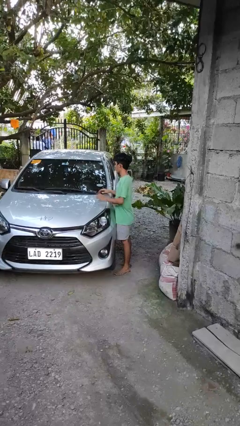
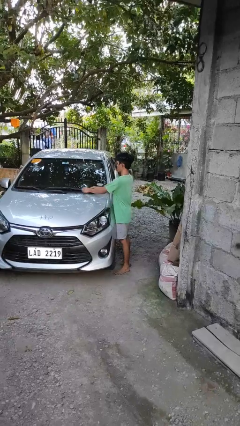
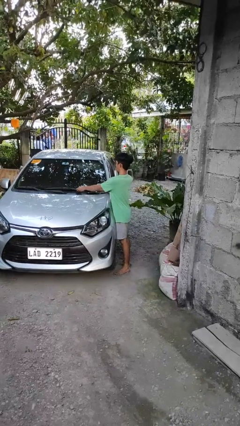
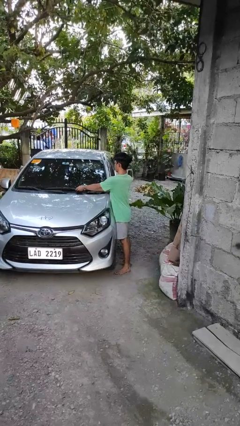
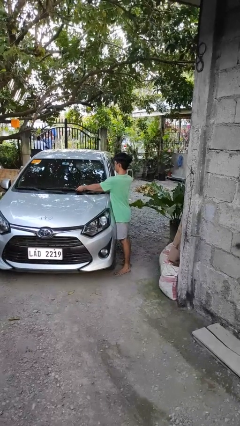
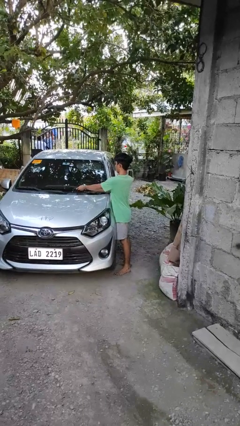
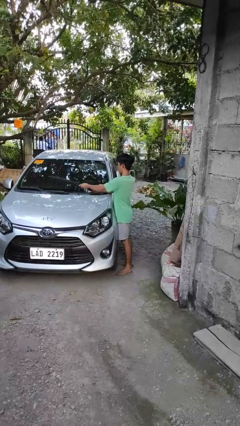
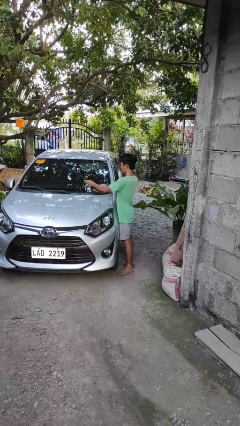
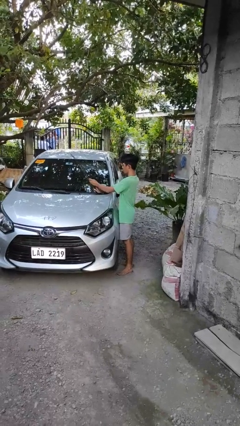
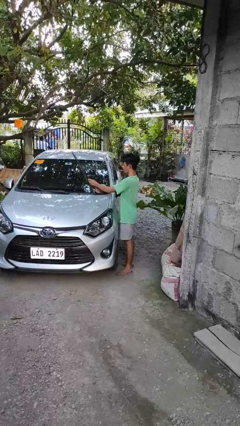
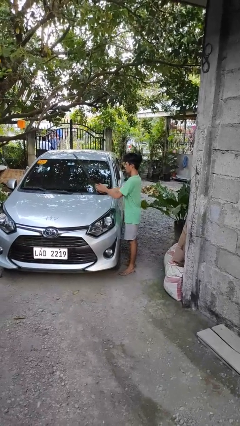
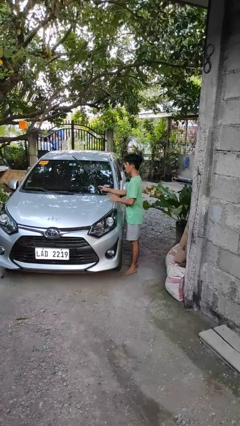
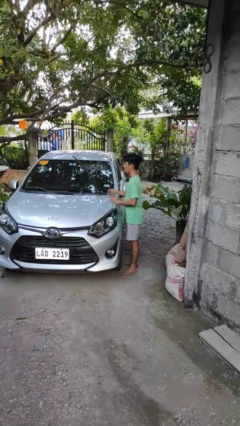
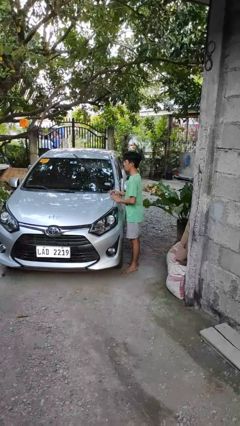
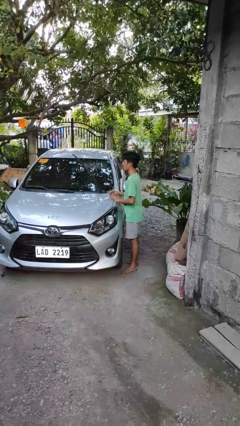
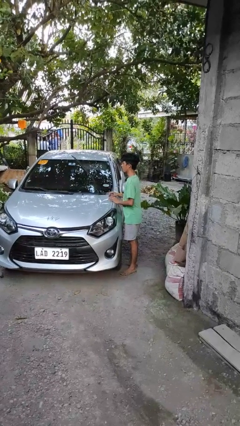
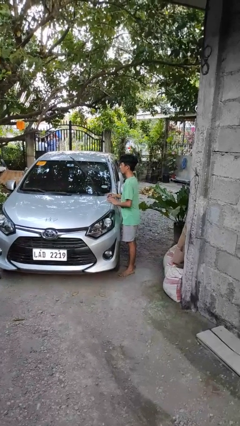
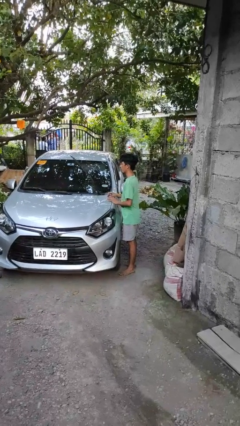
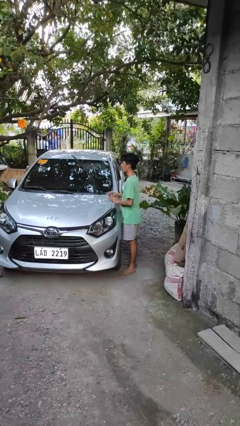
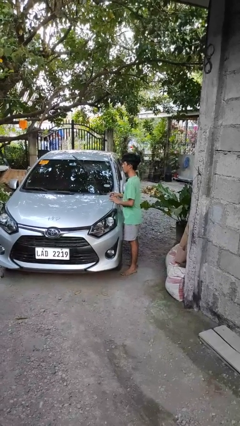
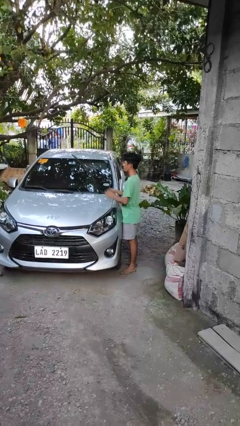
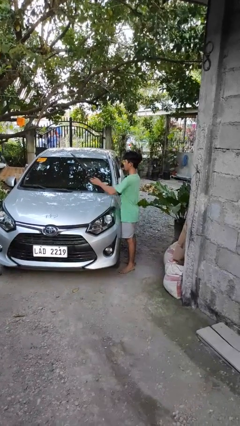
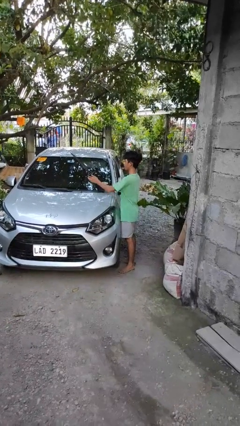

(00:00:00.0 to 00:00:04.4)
person flips up car wipers

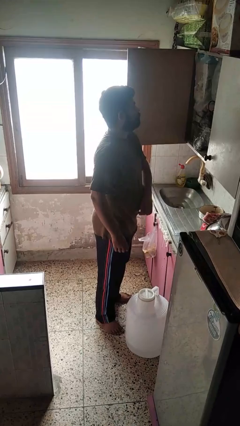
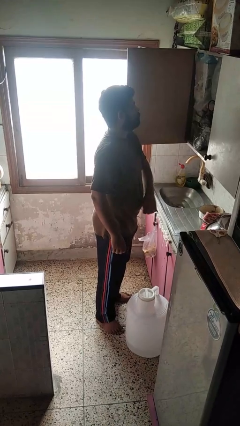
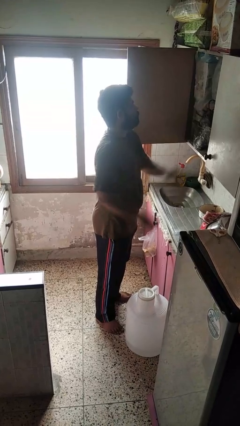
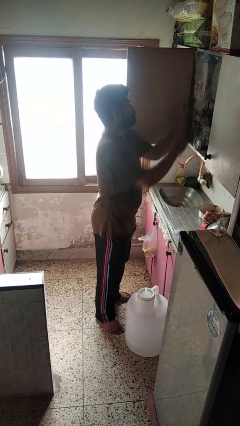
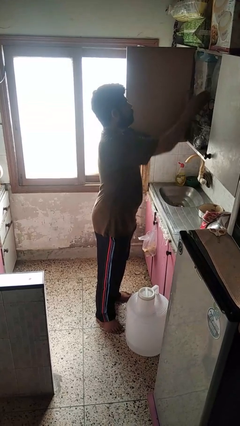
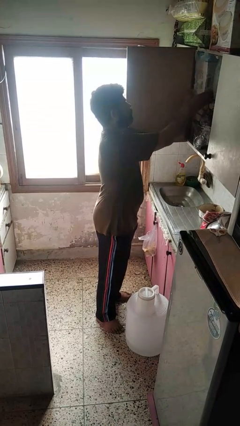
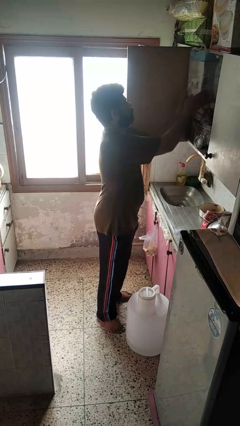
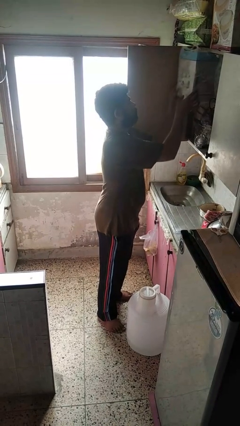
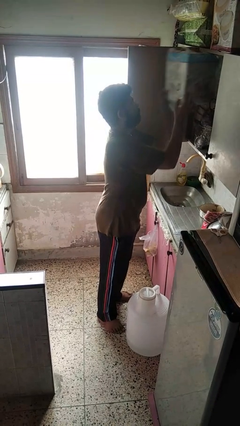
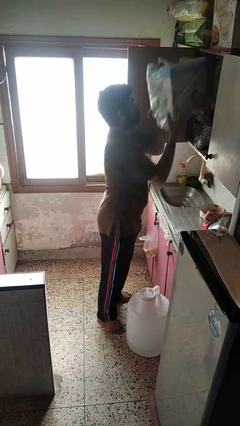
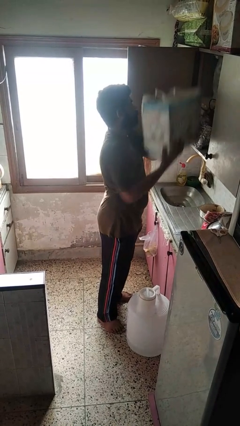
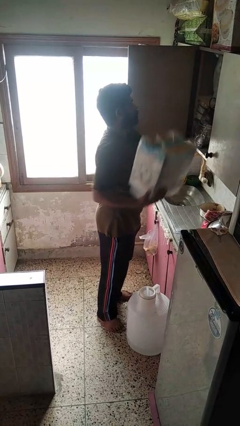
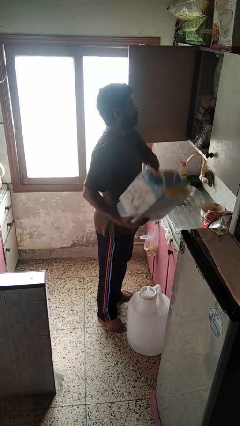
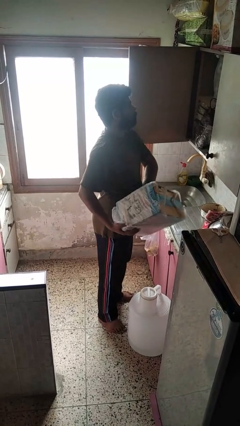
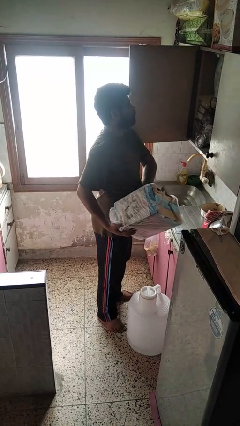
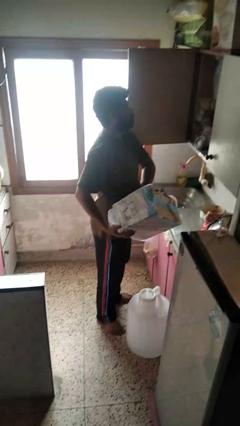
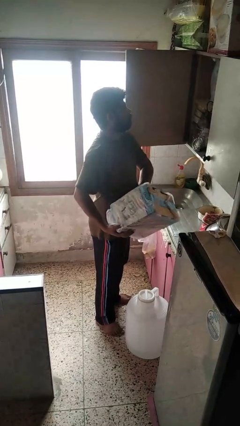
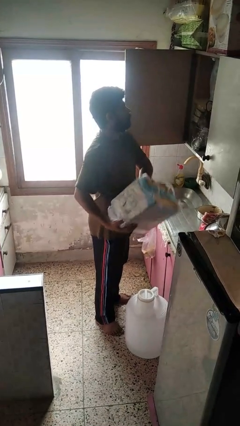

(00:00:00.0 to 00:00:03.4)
person picks up object from cabinet

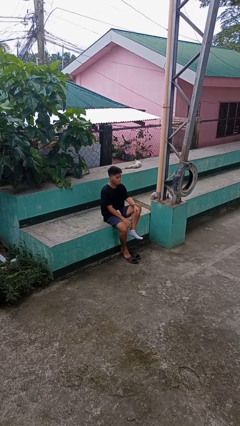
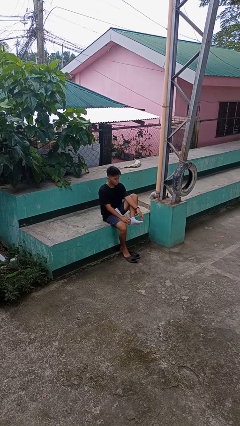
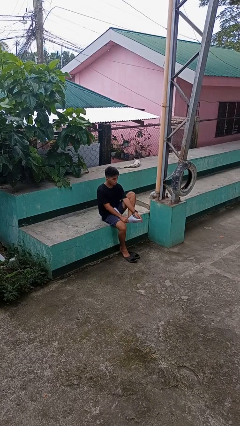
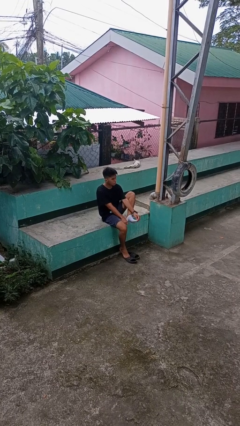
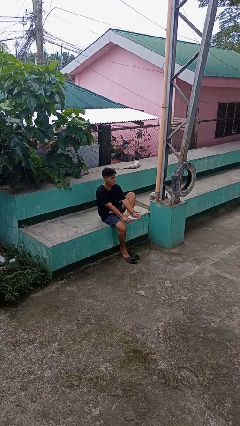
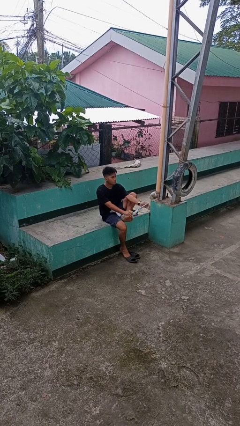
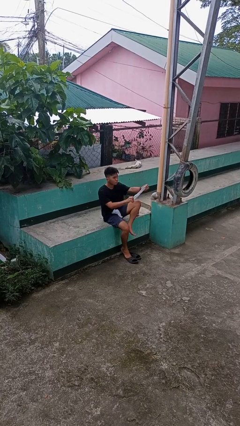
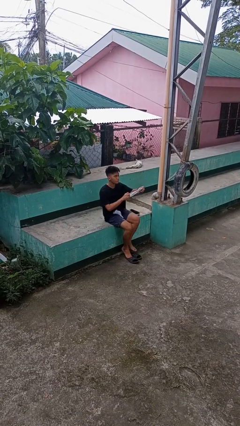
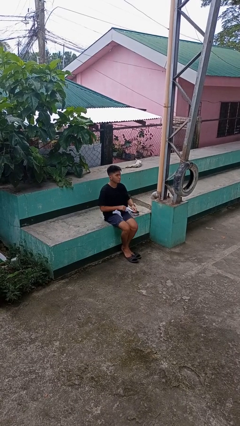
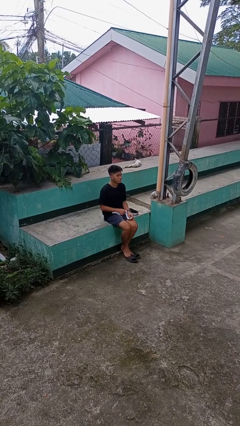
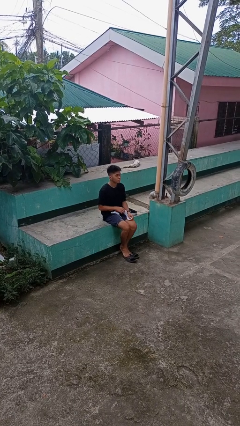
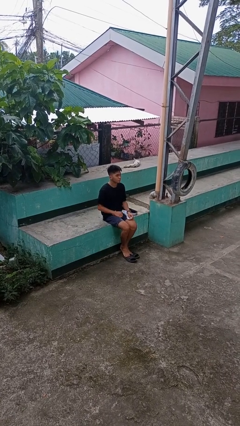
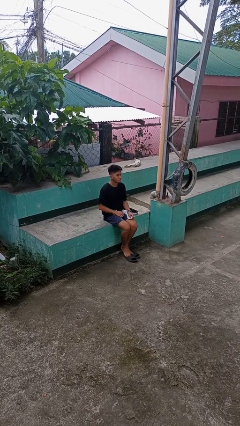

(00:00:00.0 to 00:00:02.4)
person takes off socks

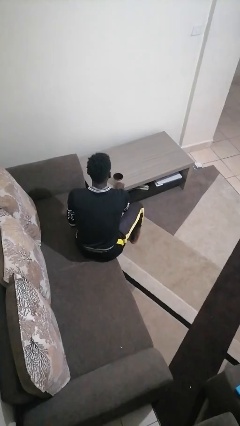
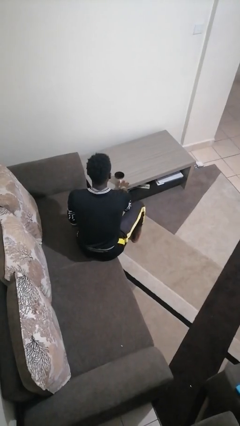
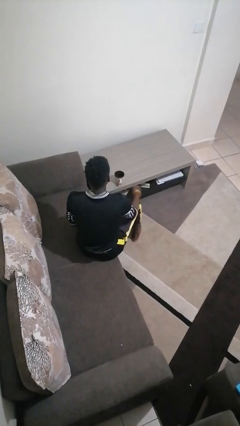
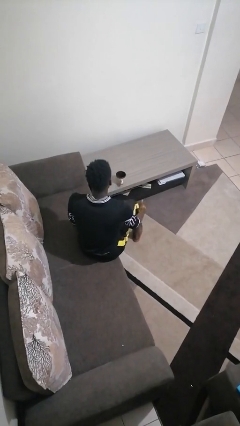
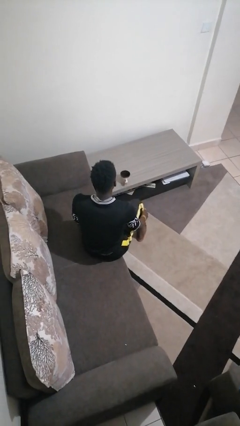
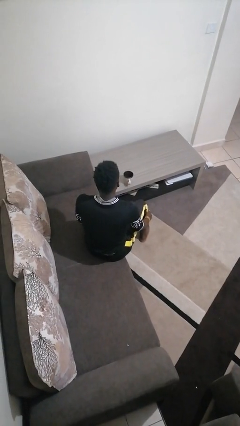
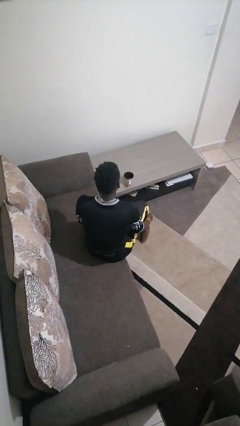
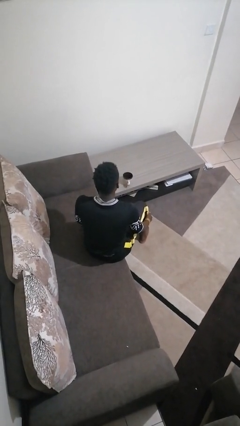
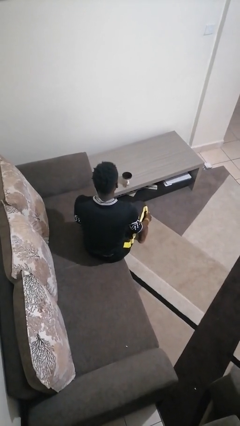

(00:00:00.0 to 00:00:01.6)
person puts down object on table

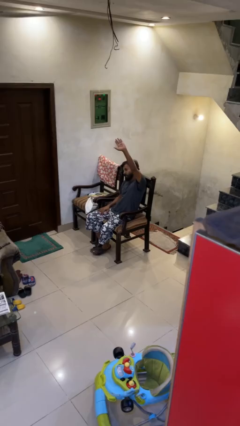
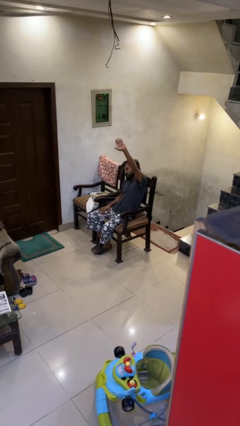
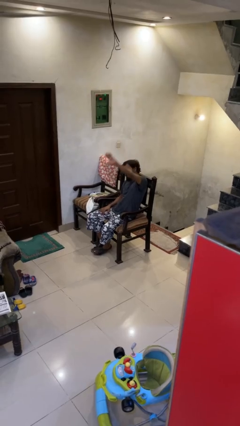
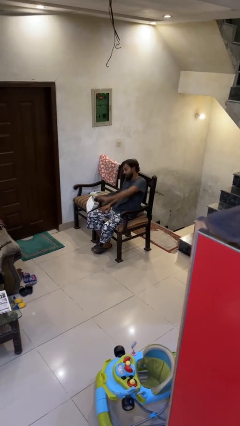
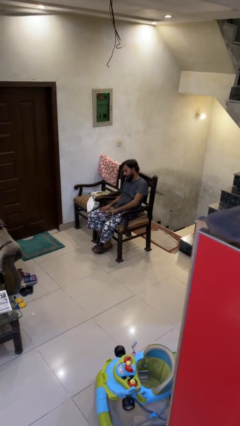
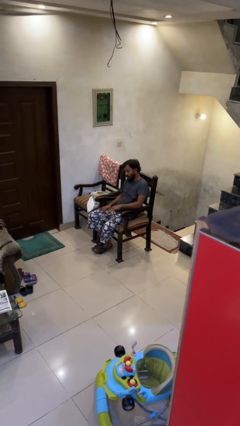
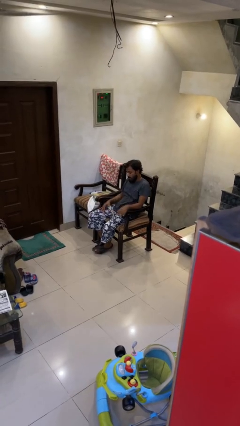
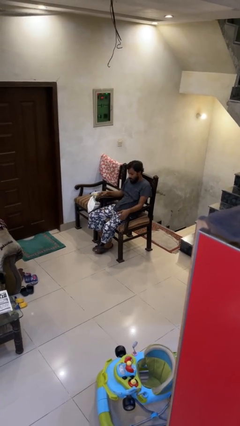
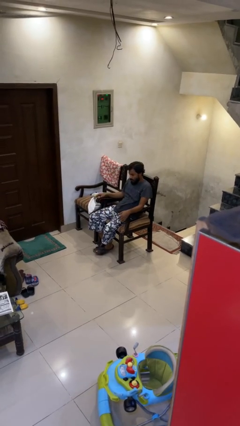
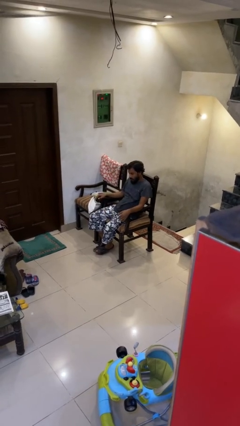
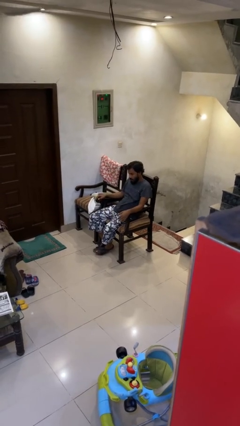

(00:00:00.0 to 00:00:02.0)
person gestures swipe down

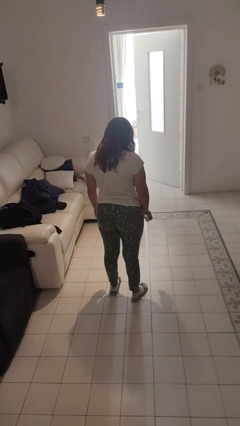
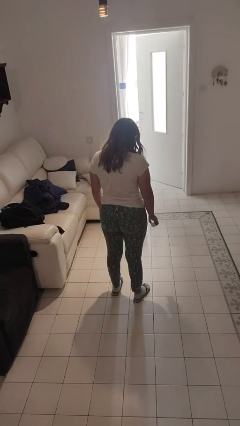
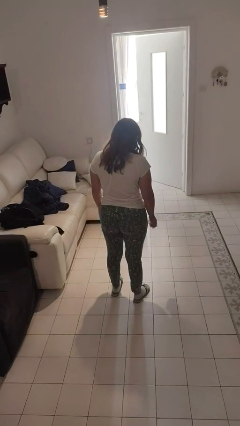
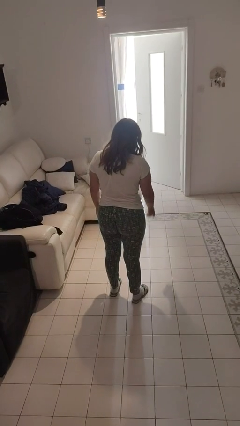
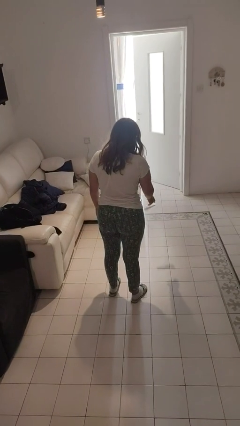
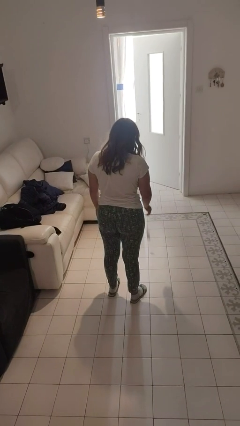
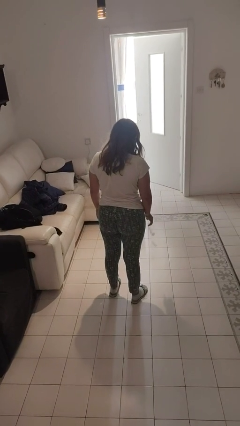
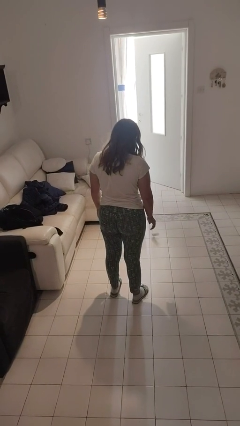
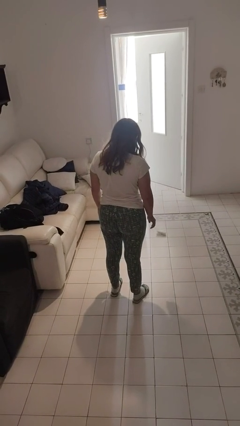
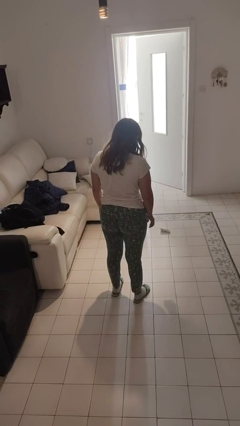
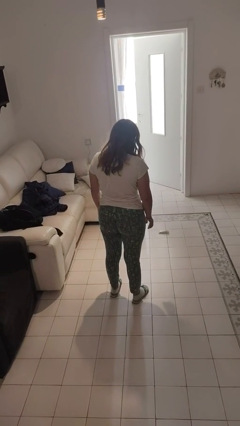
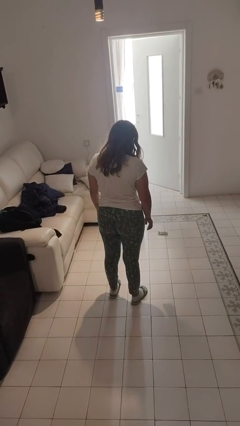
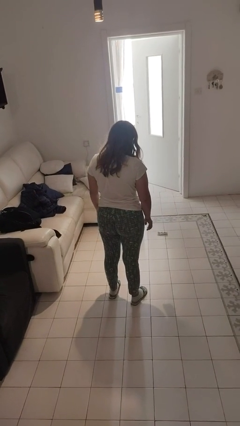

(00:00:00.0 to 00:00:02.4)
person throws object to ground

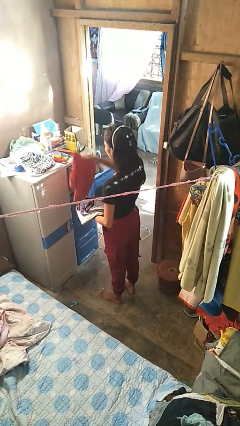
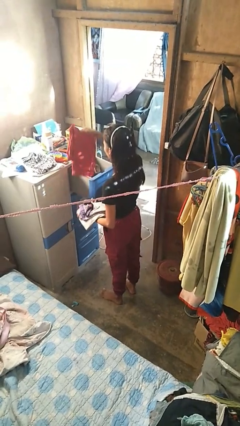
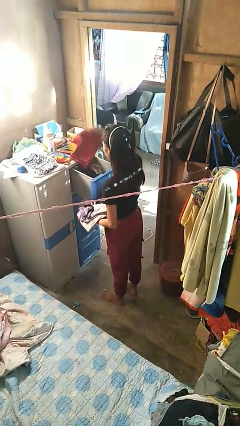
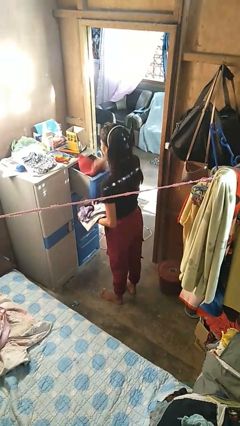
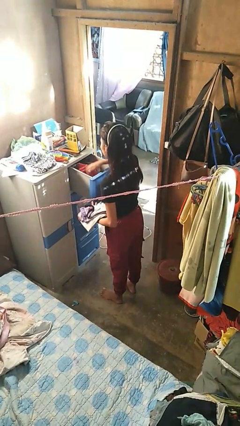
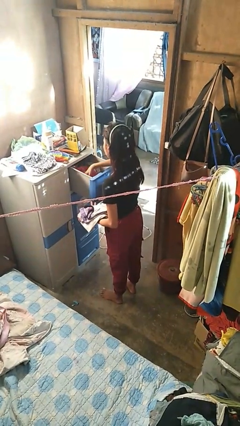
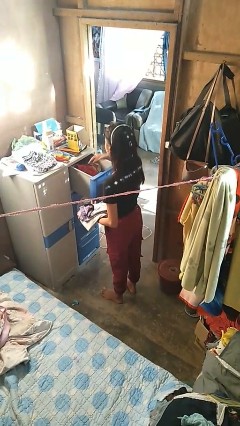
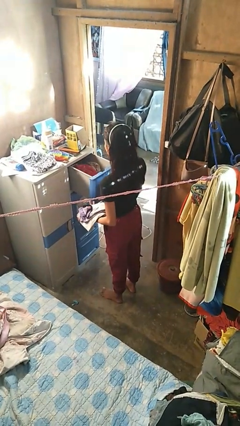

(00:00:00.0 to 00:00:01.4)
person puts clothes into dresser
